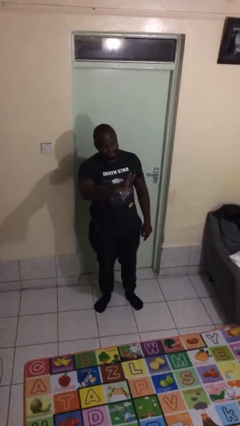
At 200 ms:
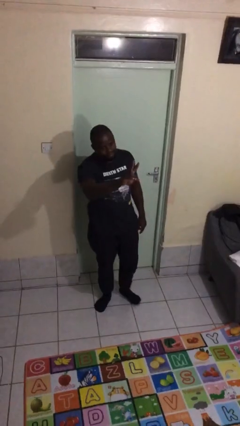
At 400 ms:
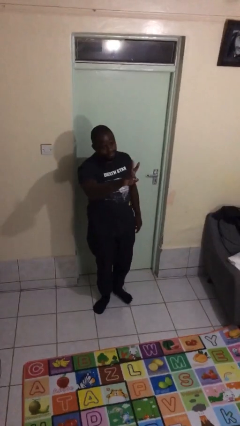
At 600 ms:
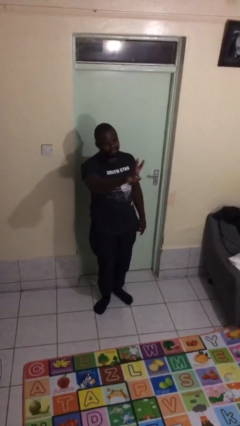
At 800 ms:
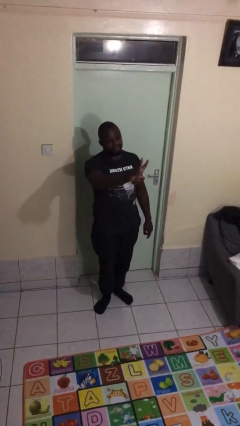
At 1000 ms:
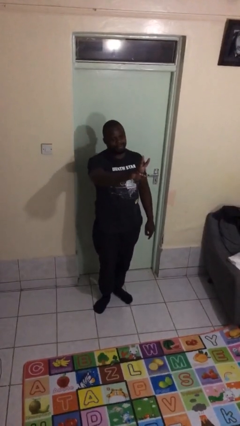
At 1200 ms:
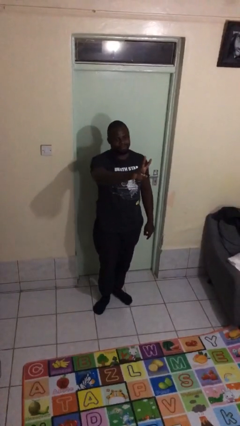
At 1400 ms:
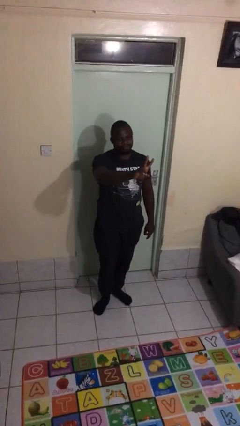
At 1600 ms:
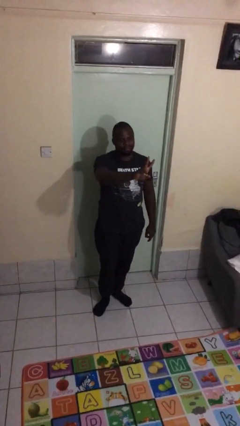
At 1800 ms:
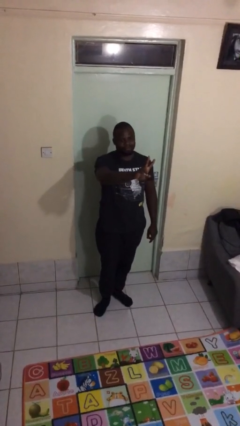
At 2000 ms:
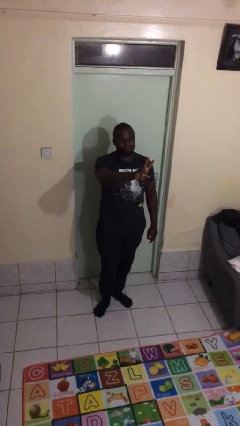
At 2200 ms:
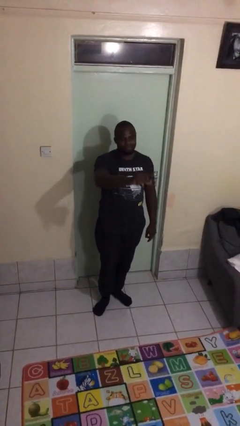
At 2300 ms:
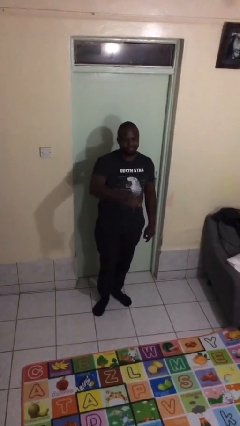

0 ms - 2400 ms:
person gestures peace

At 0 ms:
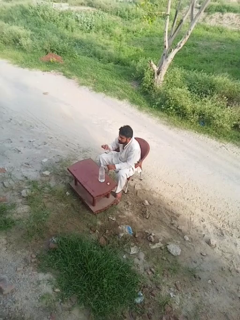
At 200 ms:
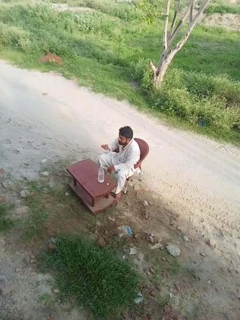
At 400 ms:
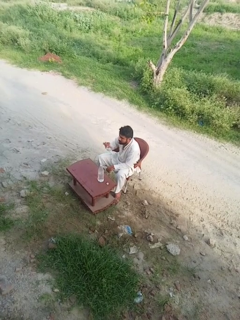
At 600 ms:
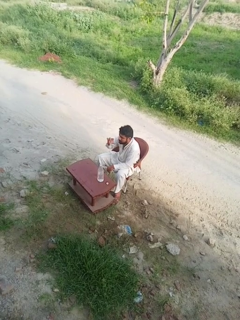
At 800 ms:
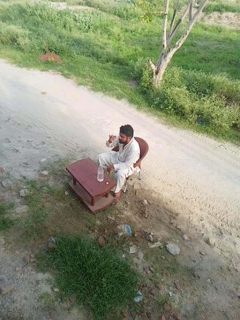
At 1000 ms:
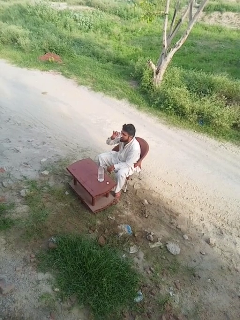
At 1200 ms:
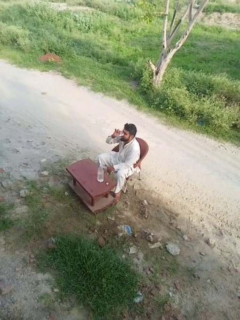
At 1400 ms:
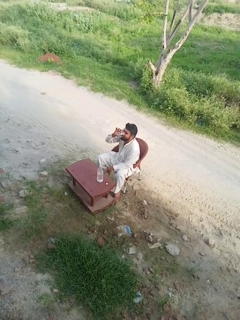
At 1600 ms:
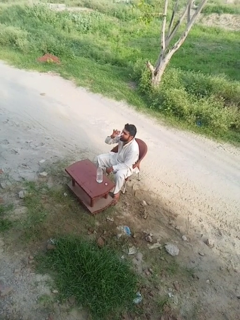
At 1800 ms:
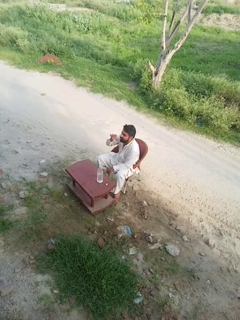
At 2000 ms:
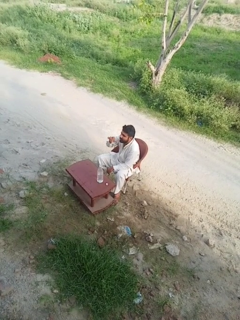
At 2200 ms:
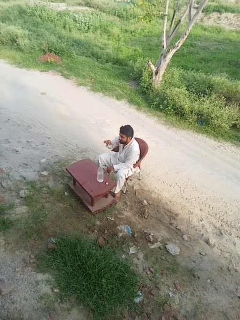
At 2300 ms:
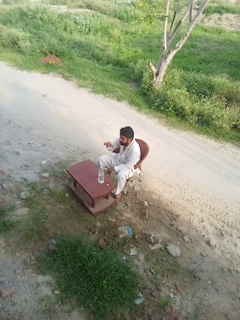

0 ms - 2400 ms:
person drinks from shotglass

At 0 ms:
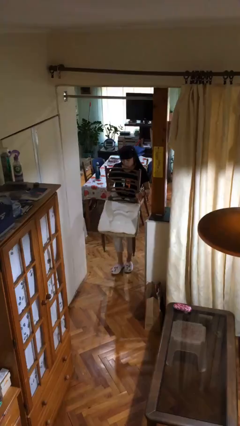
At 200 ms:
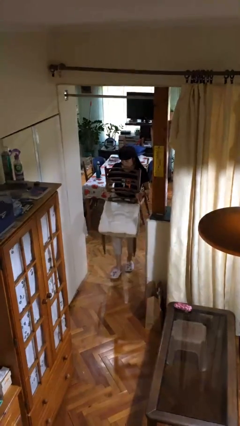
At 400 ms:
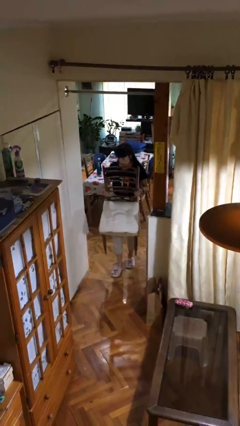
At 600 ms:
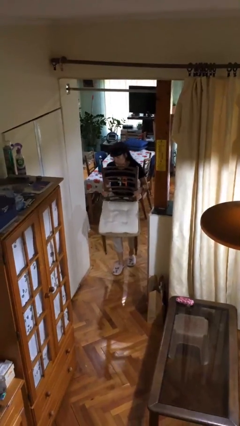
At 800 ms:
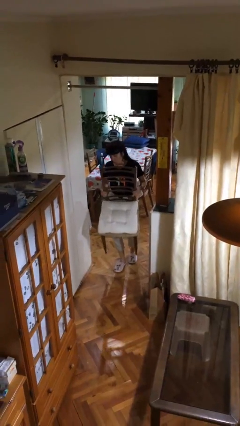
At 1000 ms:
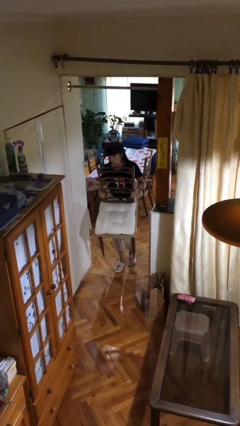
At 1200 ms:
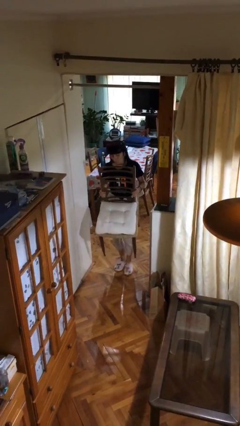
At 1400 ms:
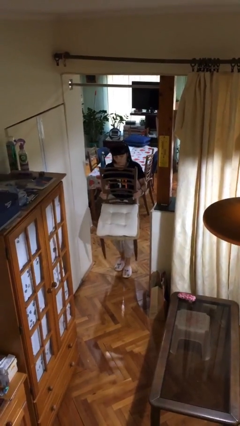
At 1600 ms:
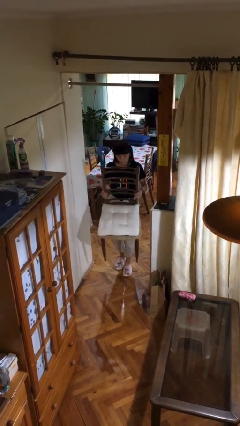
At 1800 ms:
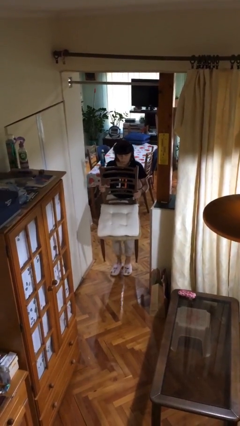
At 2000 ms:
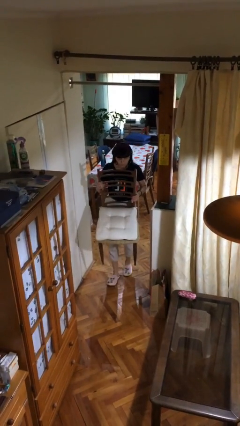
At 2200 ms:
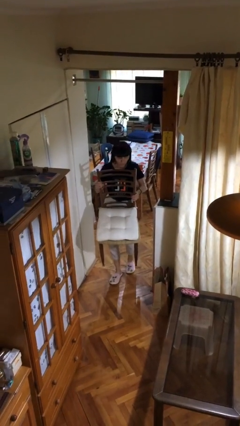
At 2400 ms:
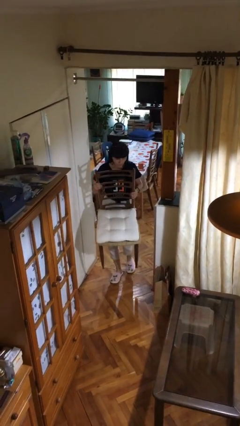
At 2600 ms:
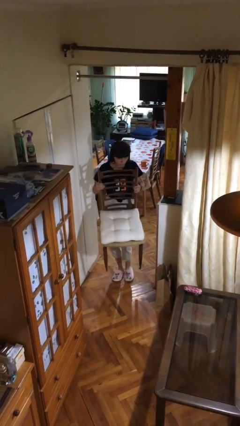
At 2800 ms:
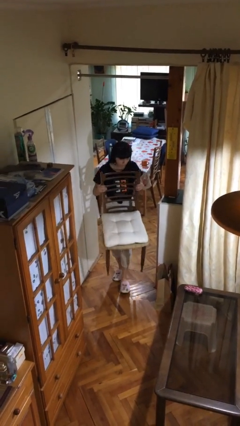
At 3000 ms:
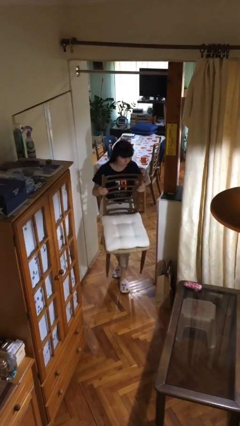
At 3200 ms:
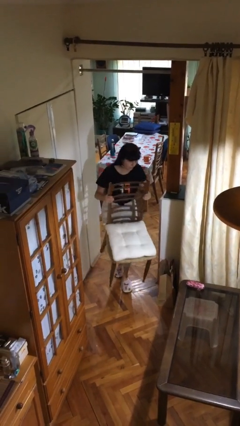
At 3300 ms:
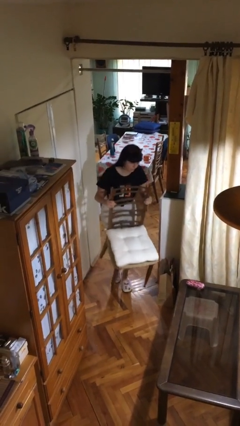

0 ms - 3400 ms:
person carries heavy object

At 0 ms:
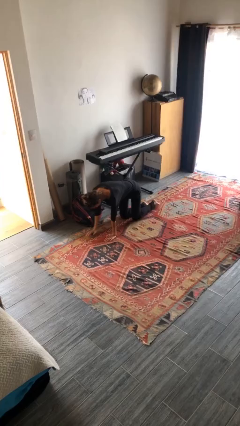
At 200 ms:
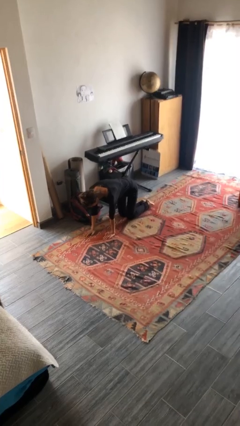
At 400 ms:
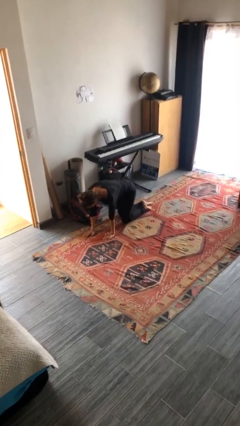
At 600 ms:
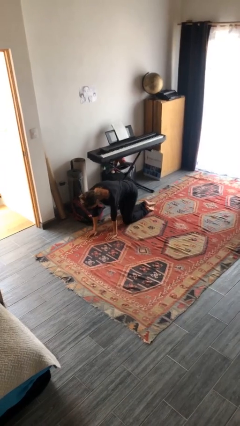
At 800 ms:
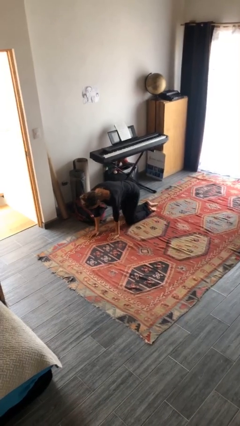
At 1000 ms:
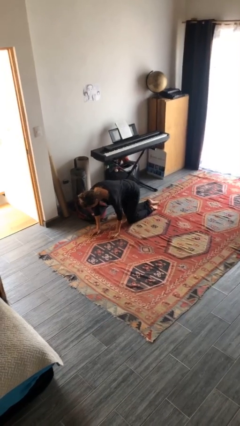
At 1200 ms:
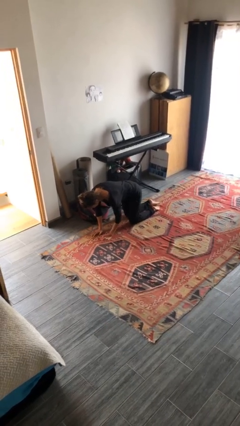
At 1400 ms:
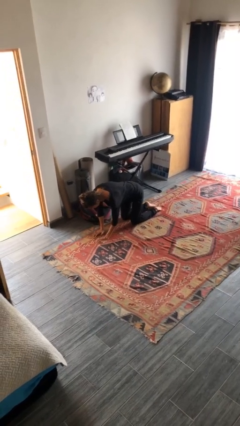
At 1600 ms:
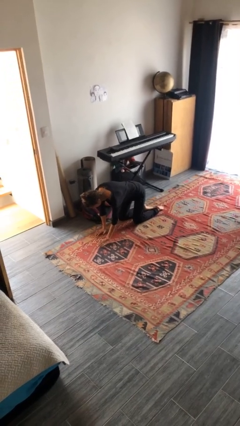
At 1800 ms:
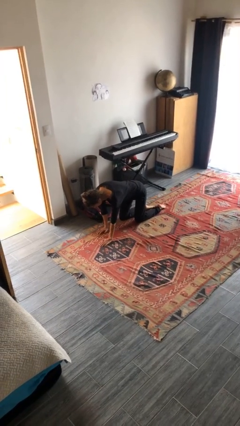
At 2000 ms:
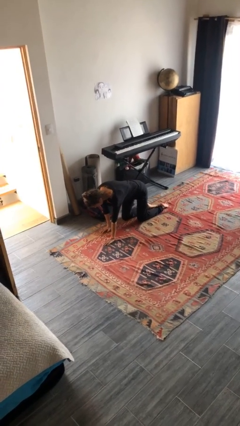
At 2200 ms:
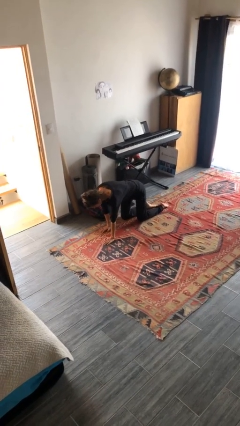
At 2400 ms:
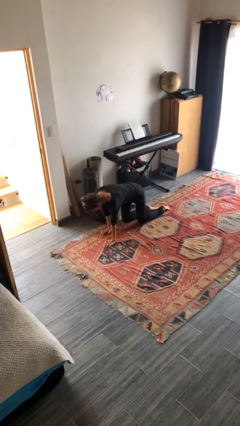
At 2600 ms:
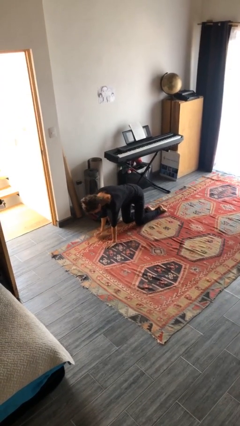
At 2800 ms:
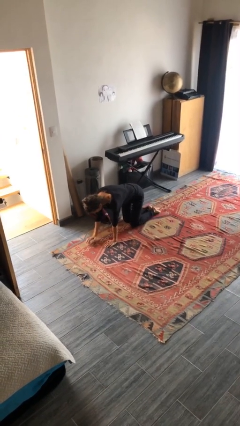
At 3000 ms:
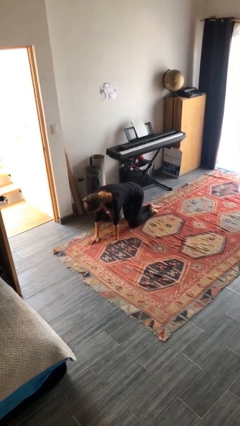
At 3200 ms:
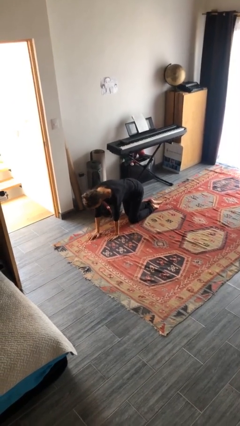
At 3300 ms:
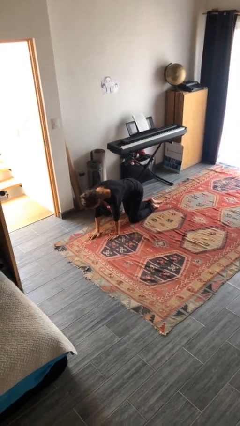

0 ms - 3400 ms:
person crawls

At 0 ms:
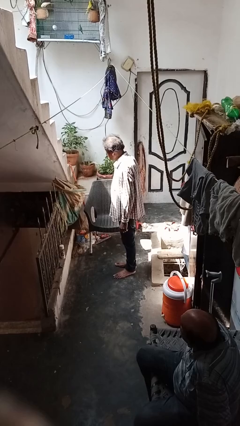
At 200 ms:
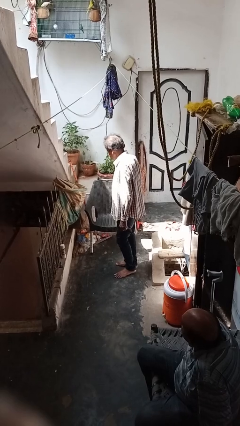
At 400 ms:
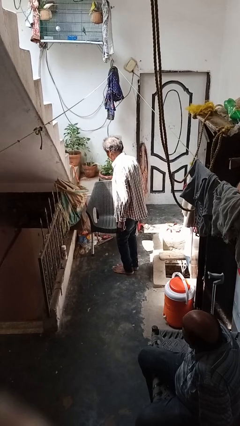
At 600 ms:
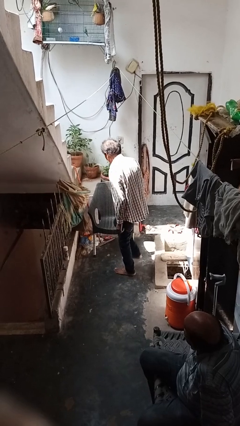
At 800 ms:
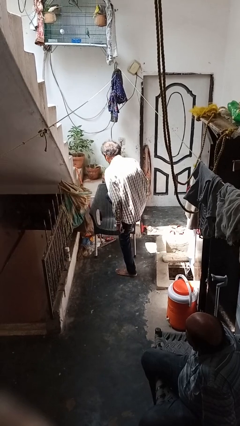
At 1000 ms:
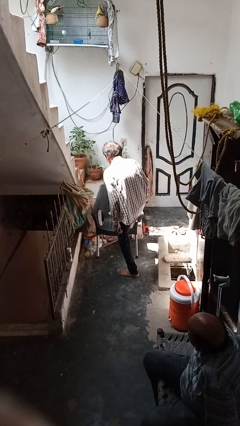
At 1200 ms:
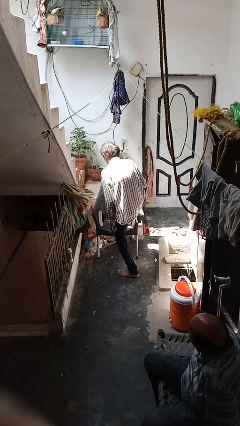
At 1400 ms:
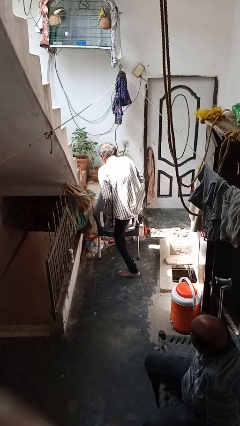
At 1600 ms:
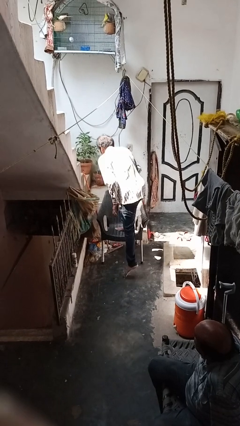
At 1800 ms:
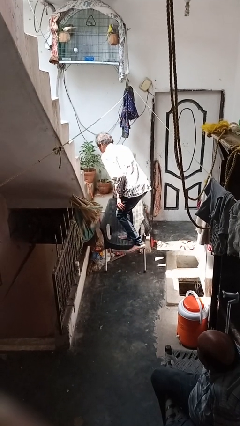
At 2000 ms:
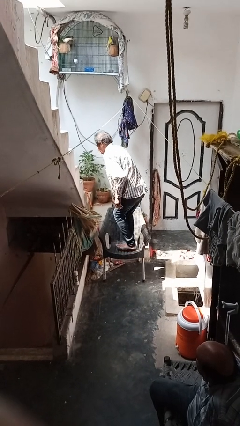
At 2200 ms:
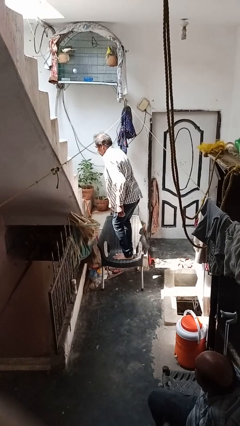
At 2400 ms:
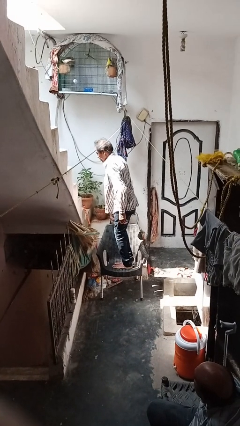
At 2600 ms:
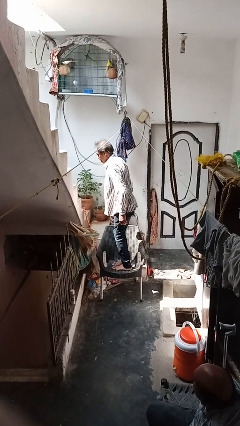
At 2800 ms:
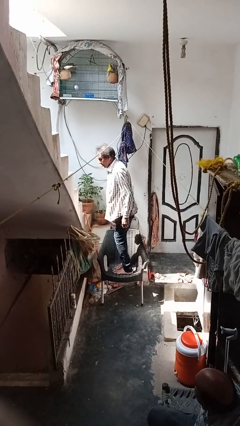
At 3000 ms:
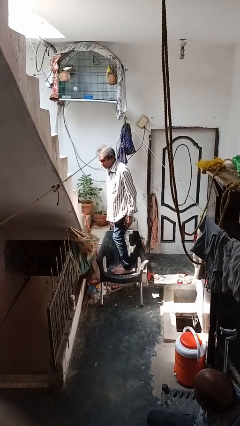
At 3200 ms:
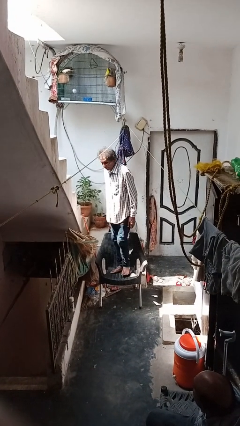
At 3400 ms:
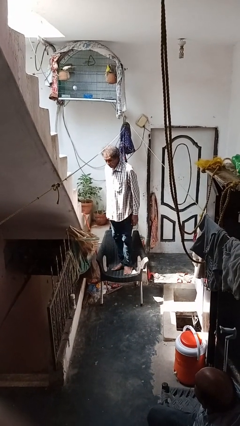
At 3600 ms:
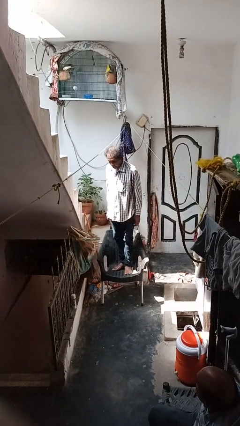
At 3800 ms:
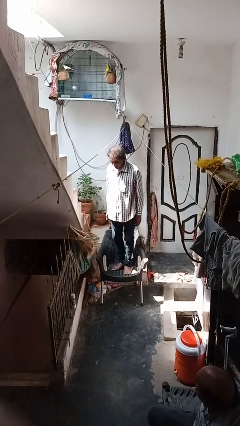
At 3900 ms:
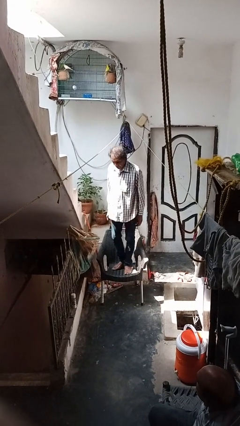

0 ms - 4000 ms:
person climbs on chair

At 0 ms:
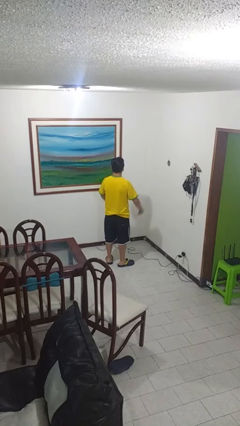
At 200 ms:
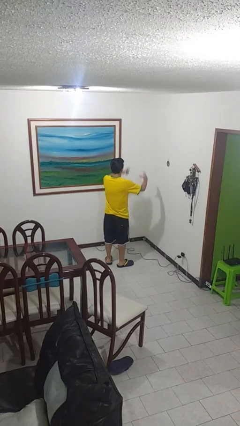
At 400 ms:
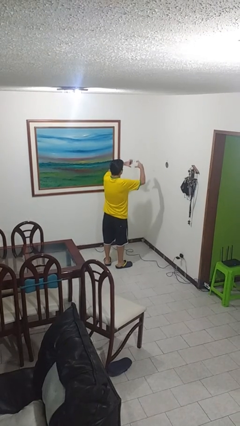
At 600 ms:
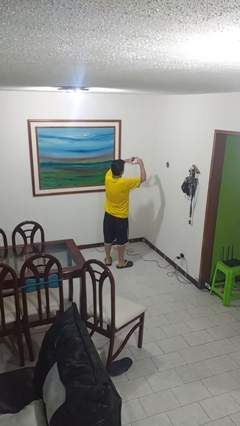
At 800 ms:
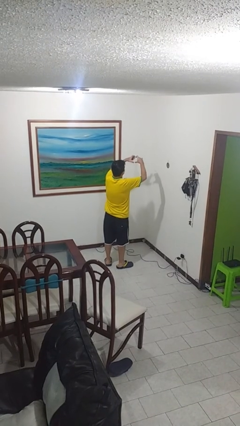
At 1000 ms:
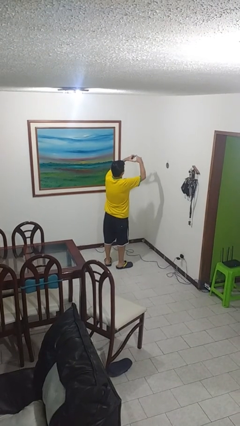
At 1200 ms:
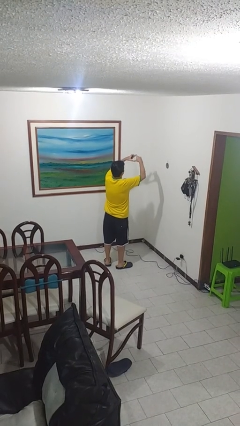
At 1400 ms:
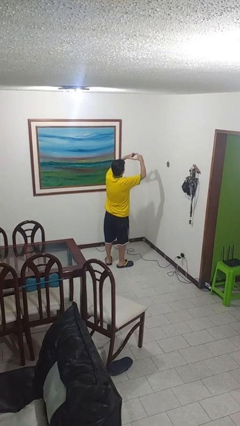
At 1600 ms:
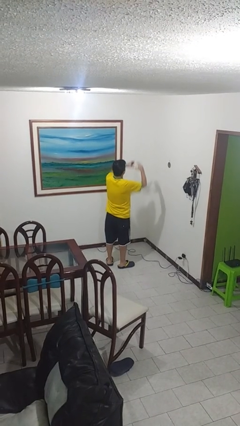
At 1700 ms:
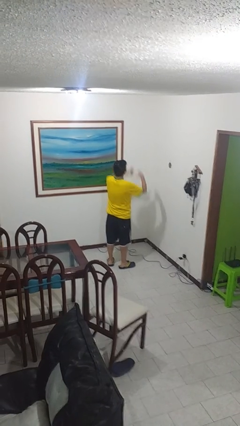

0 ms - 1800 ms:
person gestures heart

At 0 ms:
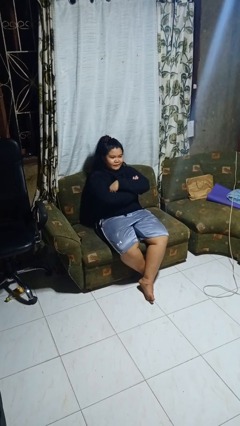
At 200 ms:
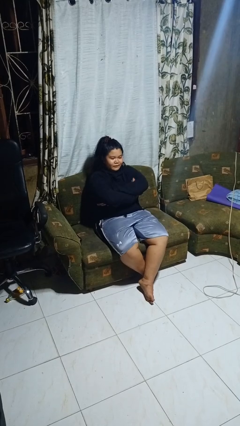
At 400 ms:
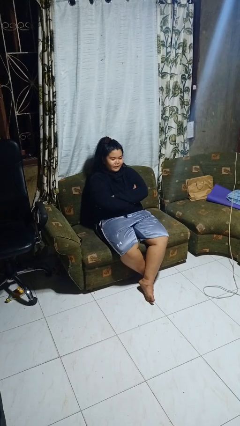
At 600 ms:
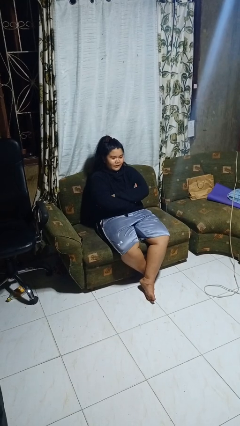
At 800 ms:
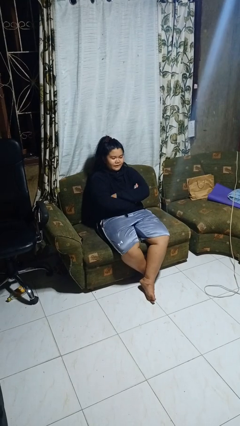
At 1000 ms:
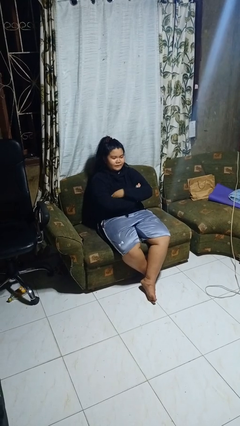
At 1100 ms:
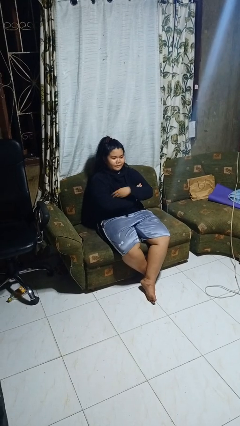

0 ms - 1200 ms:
person crosses arms
